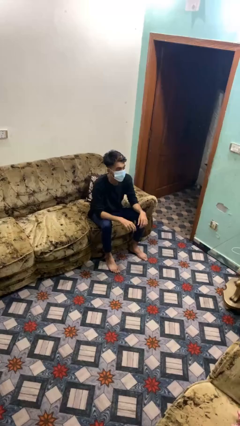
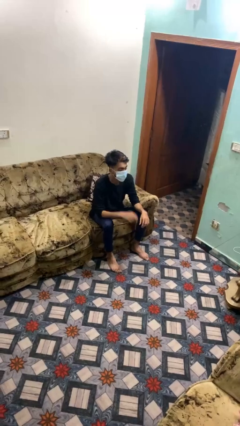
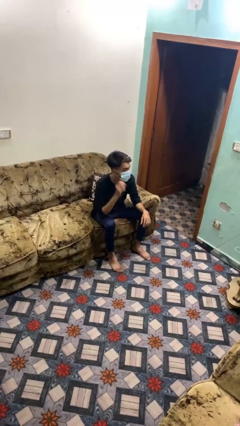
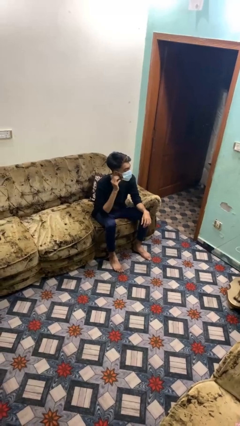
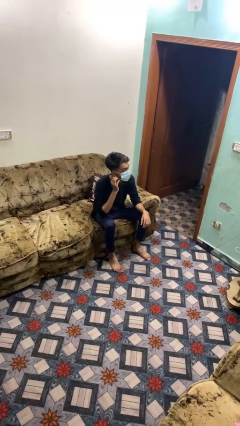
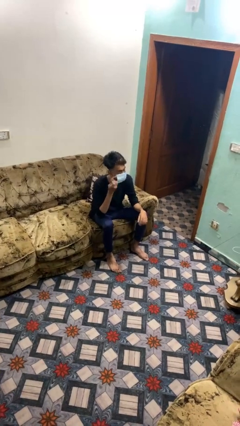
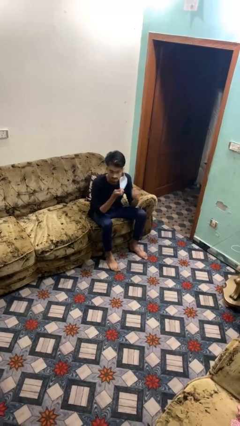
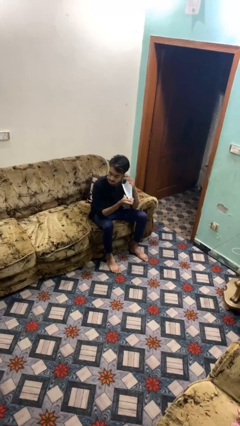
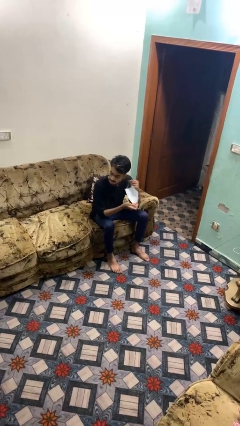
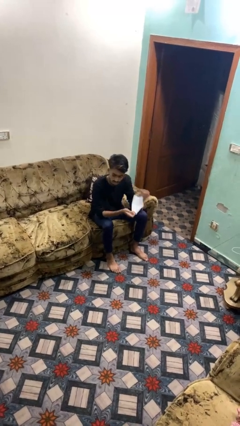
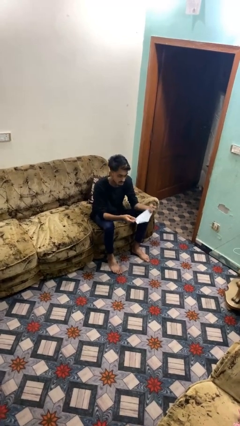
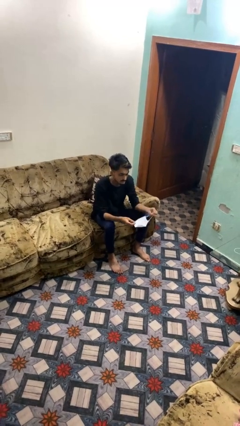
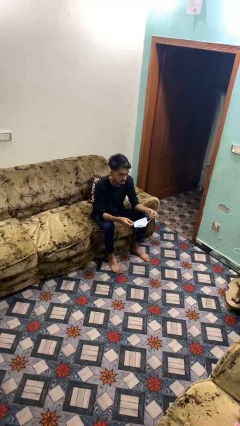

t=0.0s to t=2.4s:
person takes off facemask

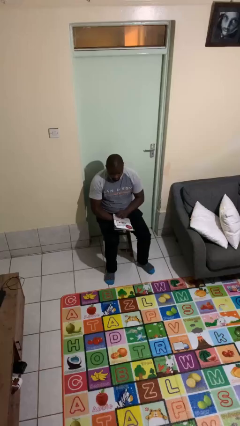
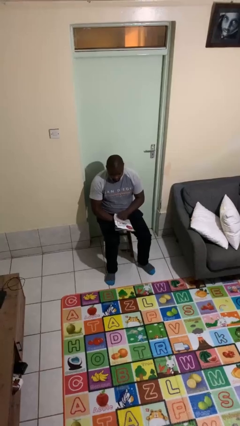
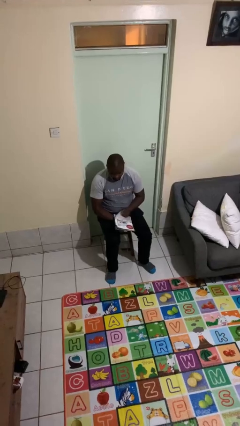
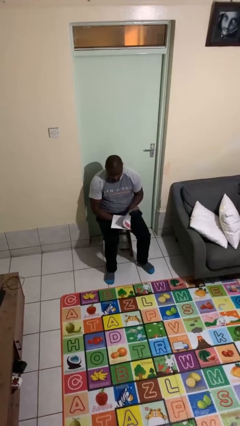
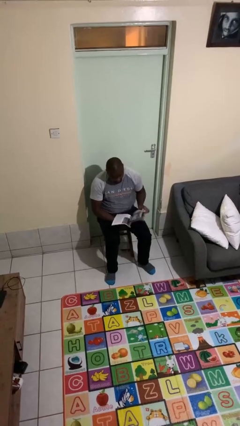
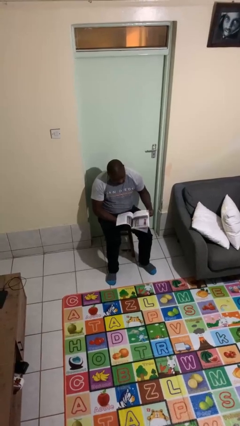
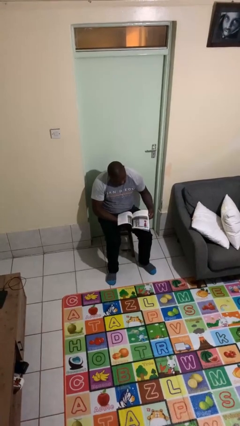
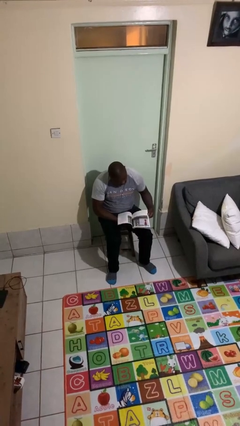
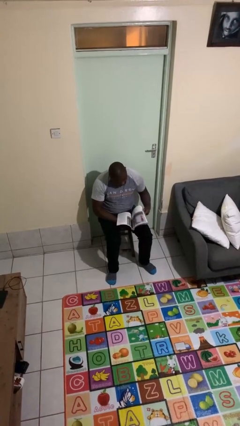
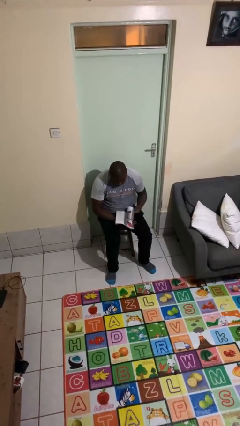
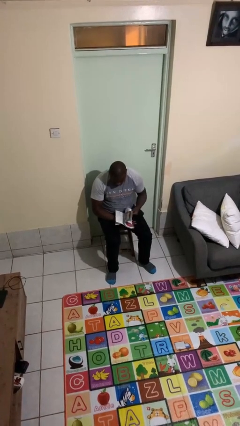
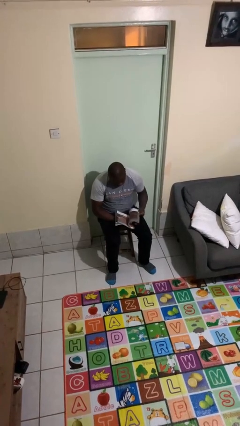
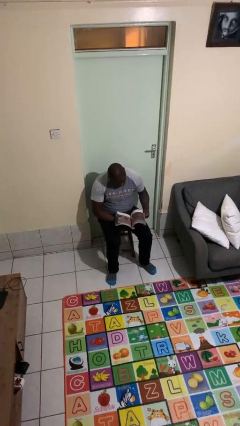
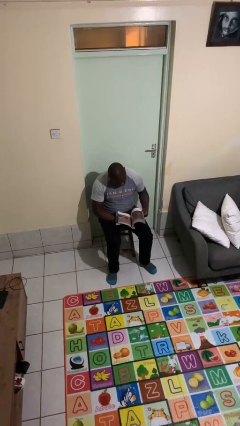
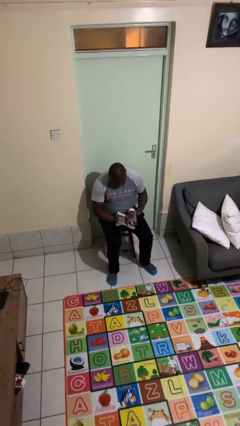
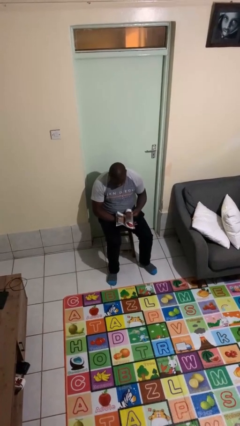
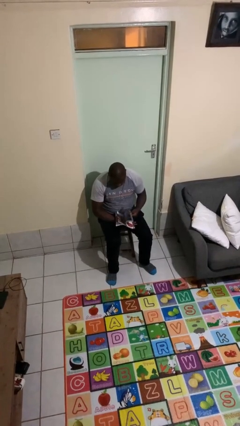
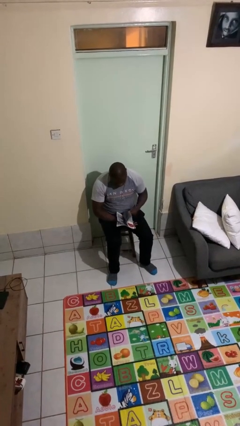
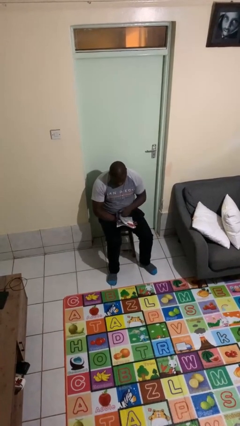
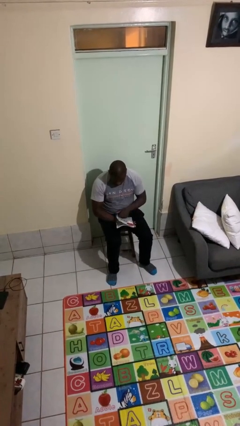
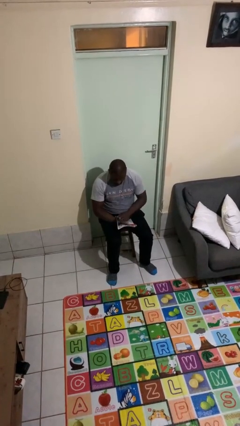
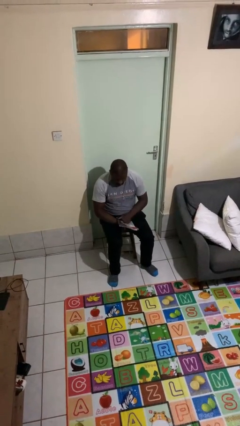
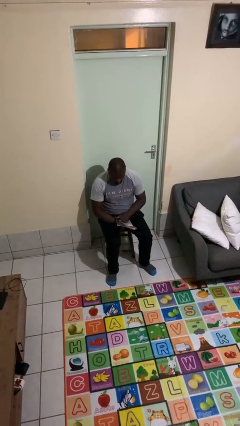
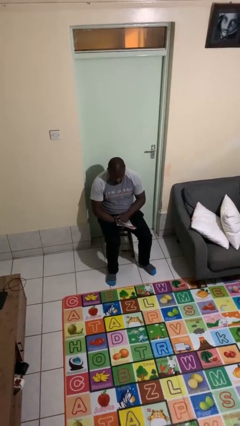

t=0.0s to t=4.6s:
person reads magazine

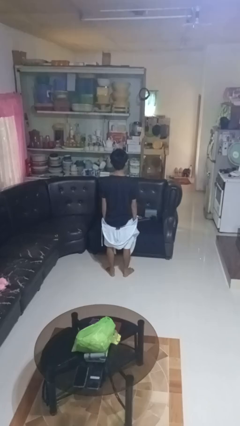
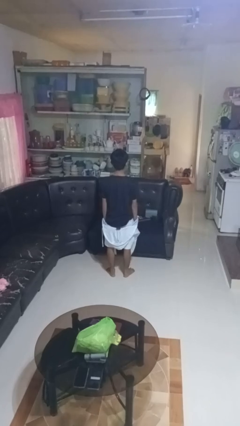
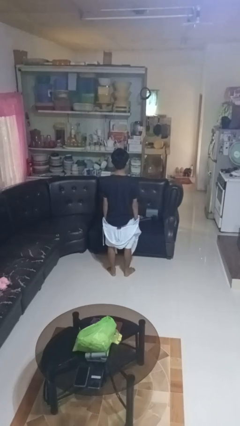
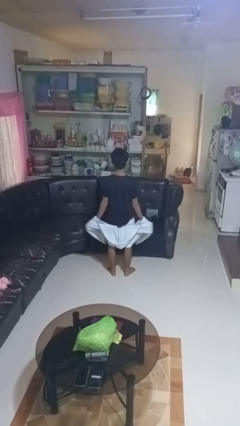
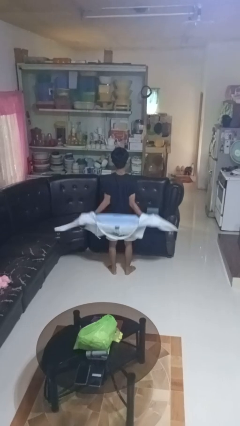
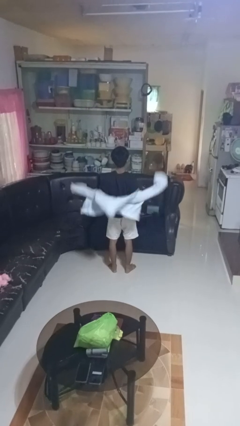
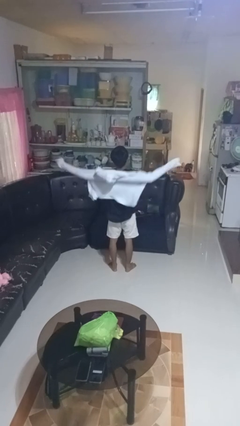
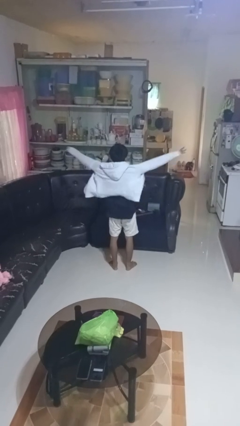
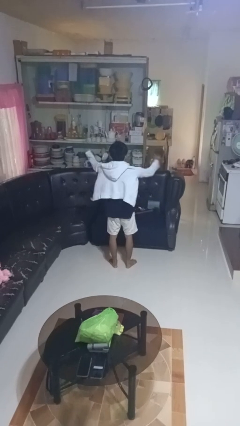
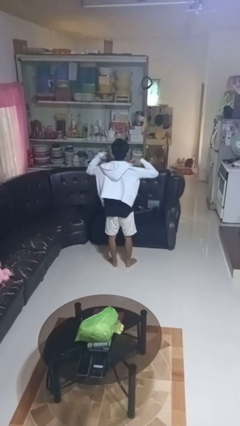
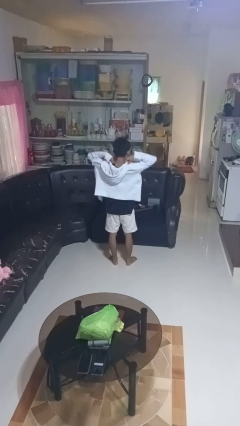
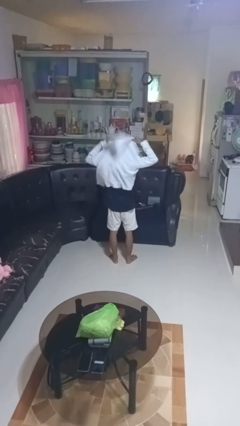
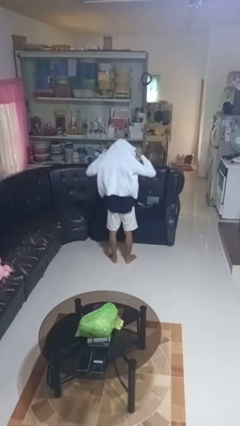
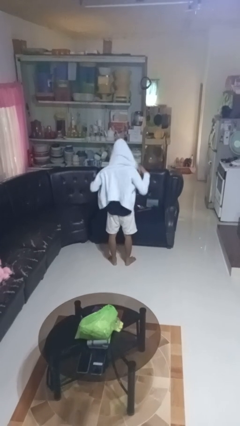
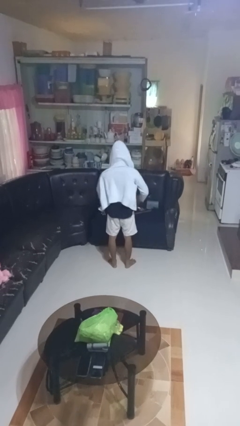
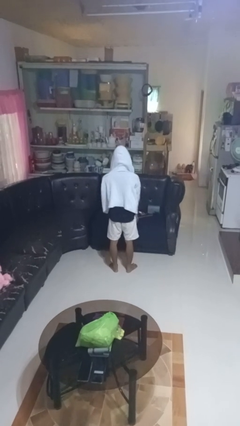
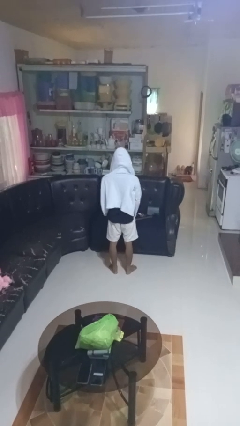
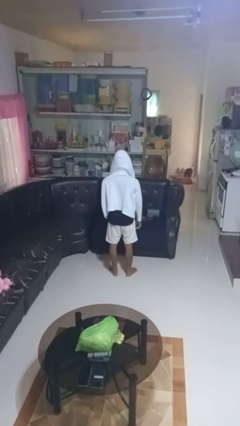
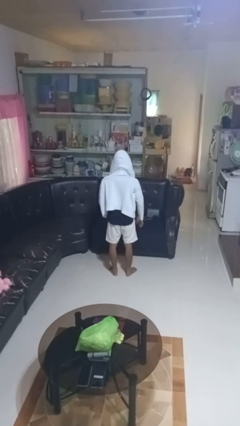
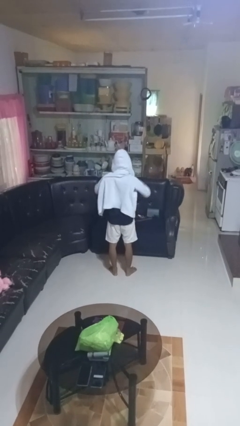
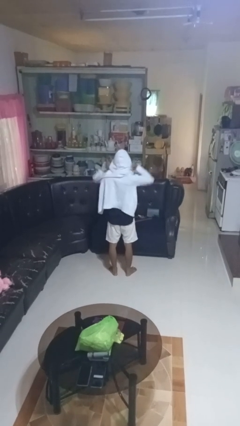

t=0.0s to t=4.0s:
person puts on hoodie

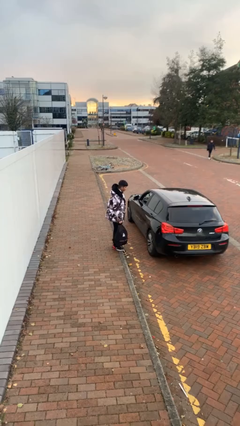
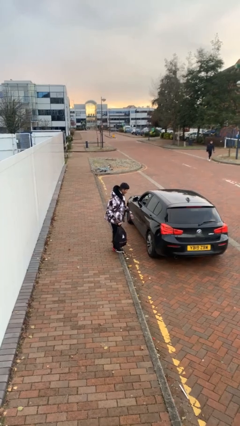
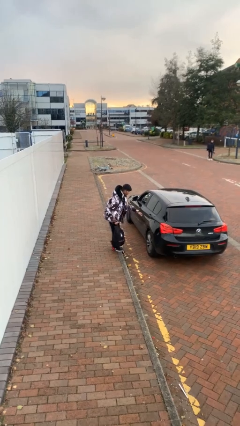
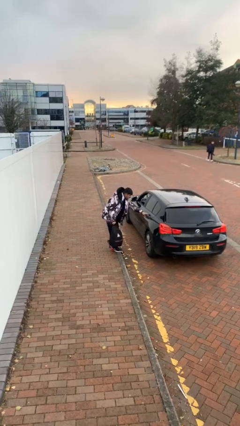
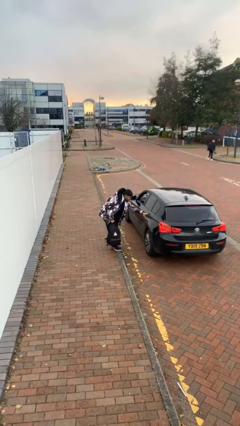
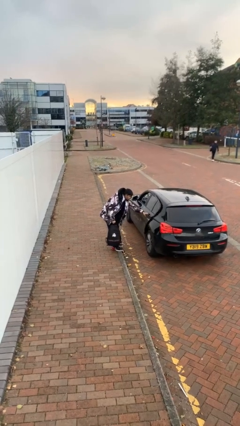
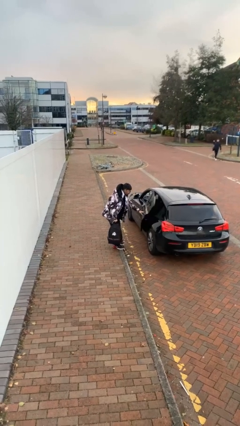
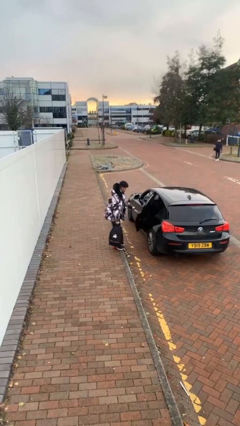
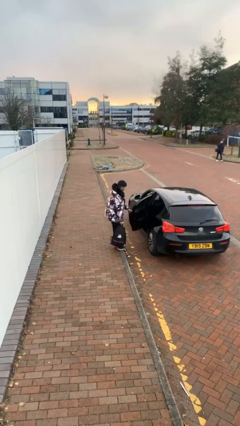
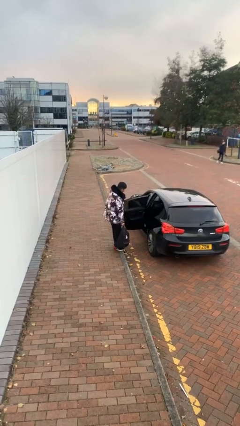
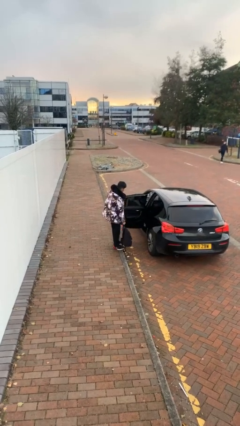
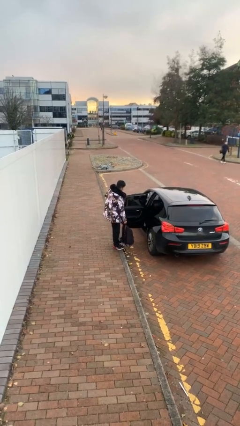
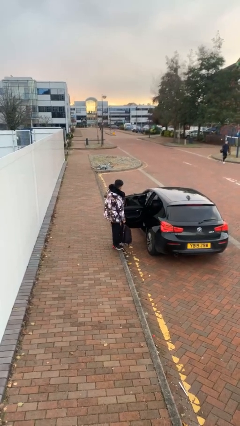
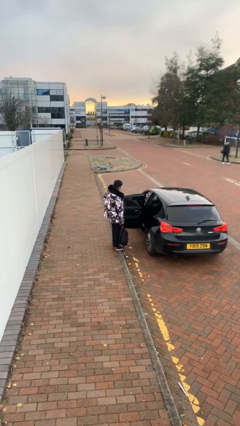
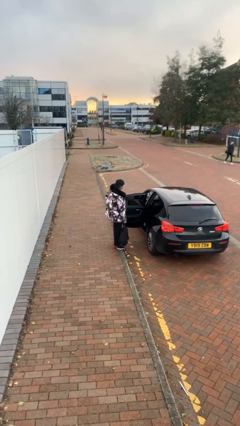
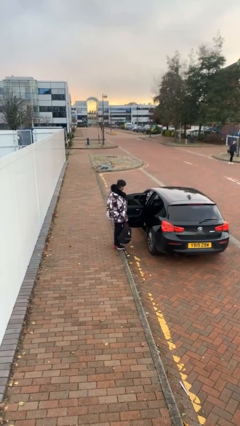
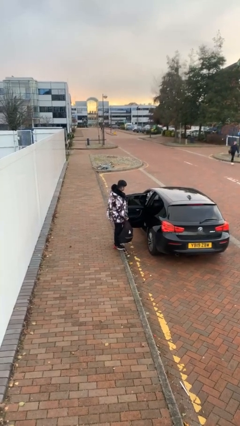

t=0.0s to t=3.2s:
person opens car door

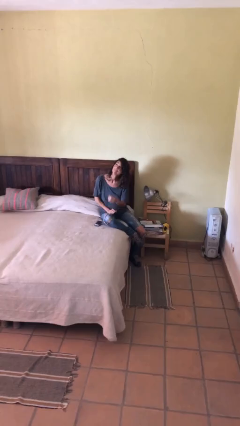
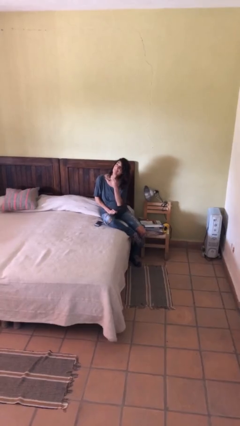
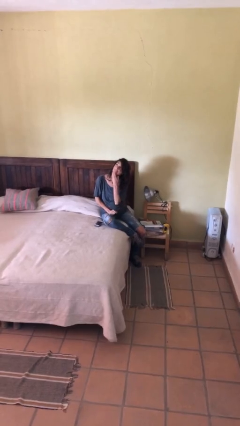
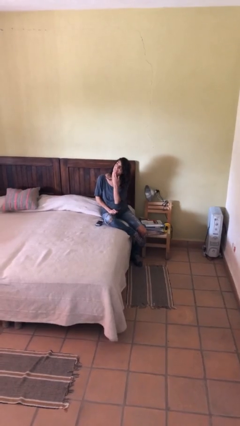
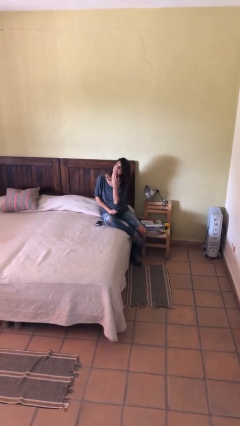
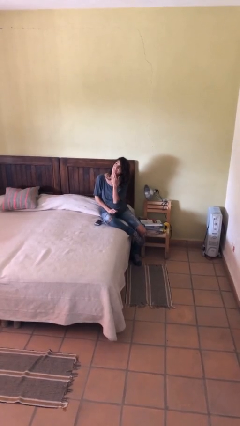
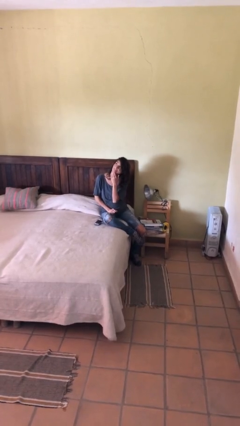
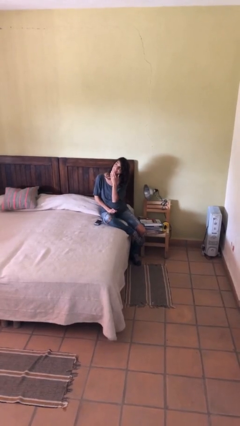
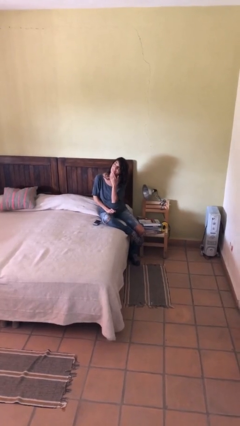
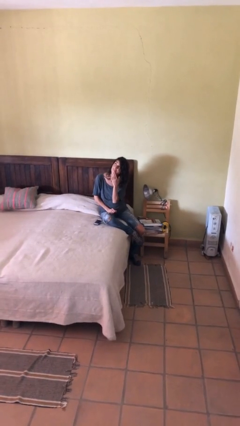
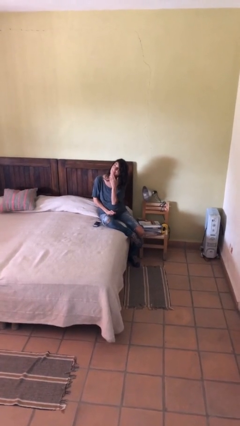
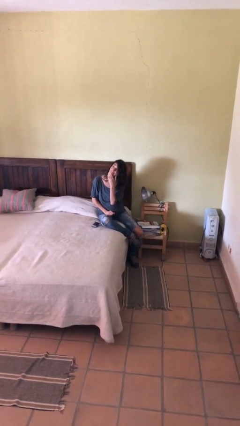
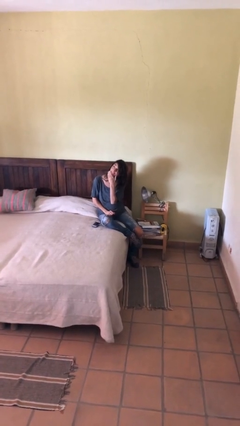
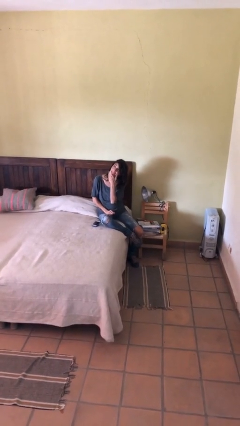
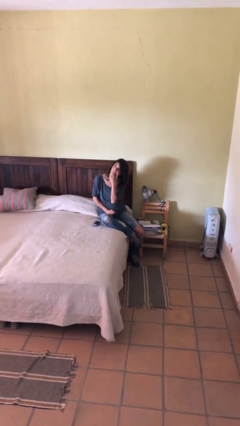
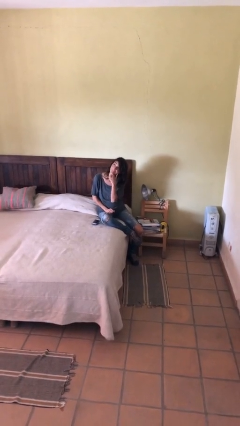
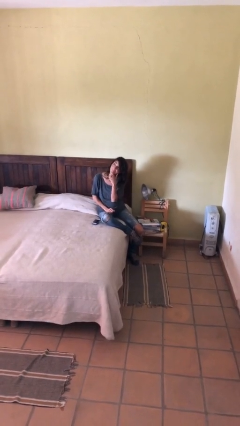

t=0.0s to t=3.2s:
person strokes chin
